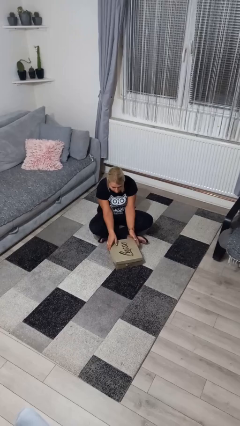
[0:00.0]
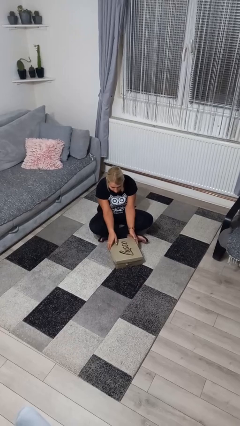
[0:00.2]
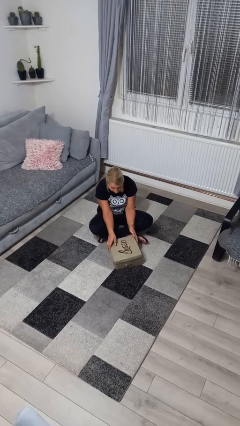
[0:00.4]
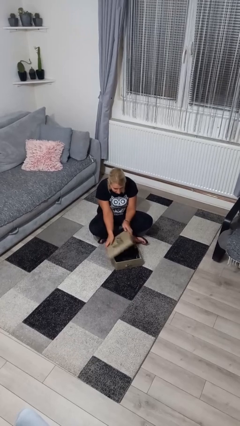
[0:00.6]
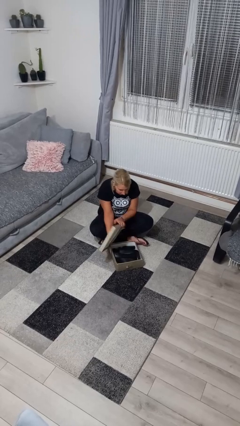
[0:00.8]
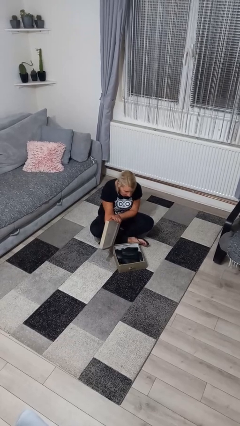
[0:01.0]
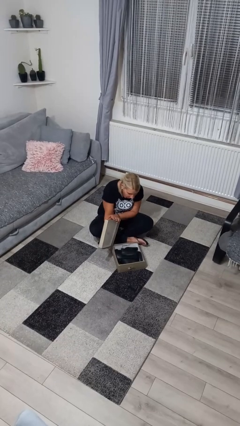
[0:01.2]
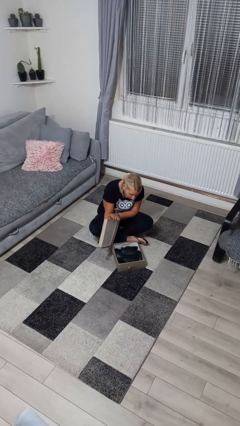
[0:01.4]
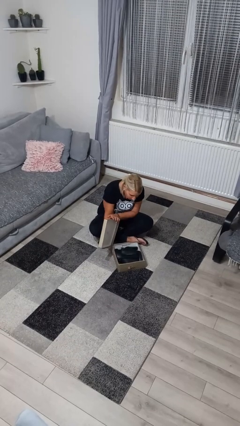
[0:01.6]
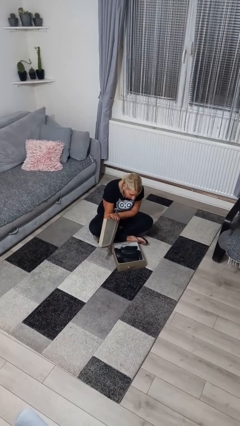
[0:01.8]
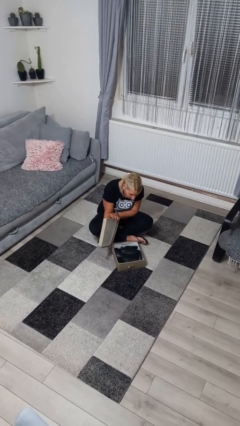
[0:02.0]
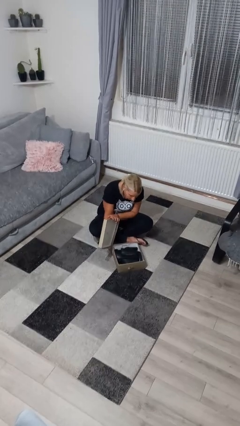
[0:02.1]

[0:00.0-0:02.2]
person opens box

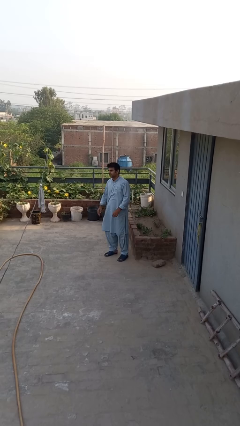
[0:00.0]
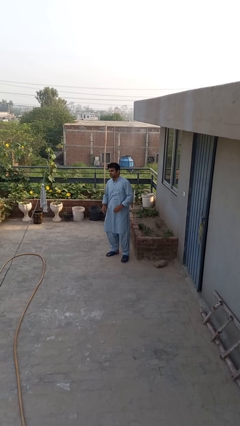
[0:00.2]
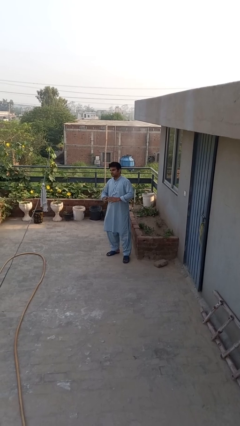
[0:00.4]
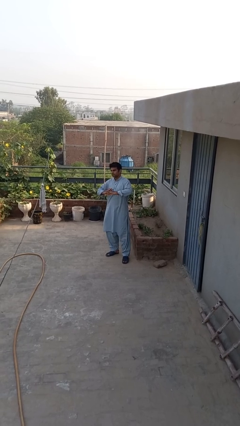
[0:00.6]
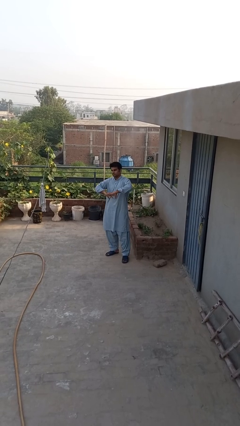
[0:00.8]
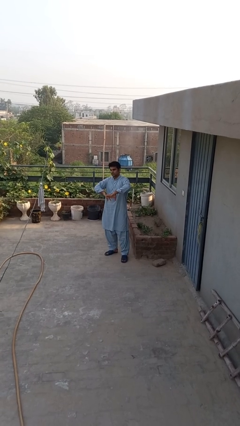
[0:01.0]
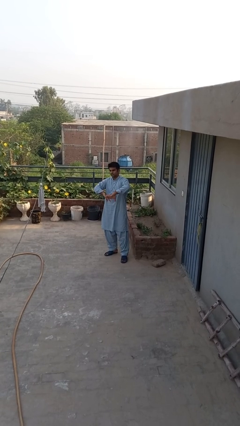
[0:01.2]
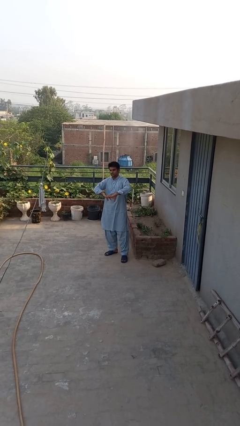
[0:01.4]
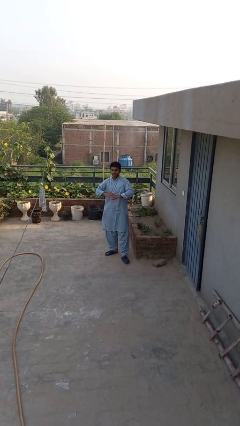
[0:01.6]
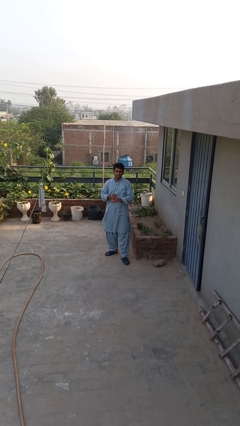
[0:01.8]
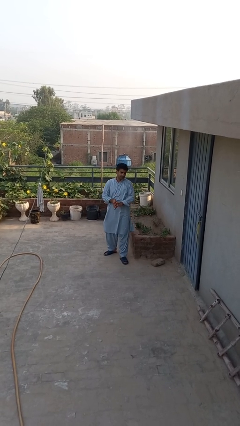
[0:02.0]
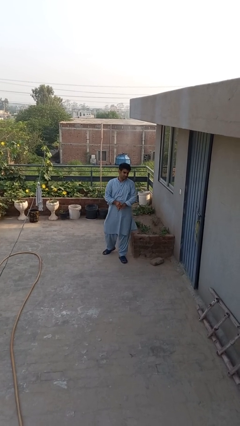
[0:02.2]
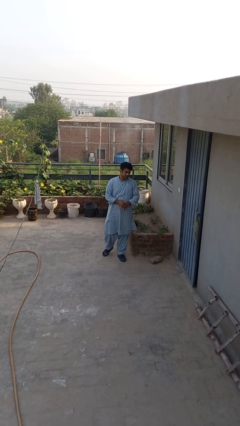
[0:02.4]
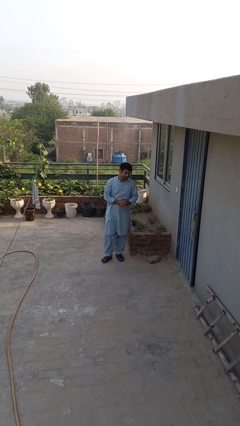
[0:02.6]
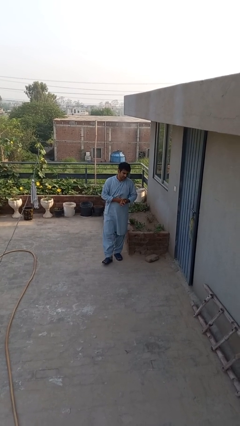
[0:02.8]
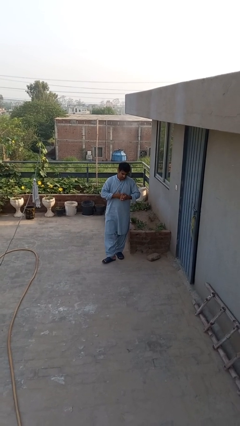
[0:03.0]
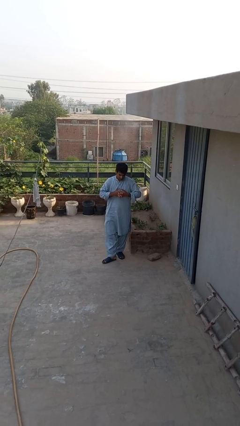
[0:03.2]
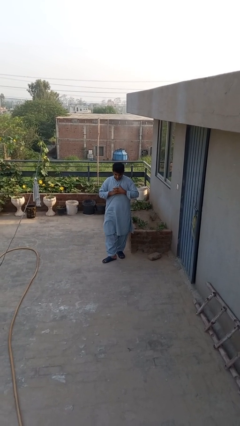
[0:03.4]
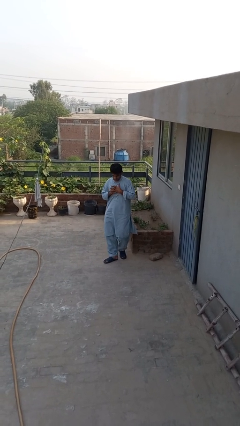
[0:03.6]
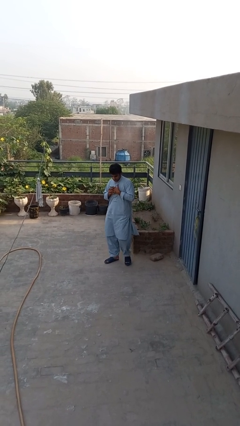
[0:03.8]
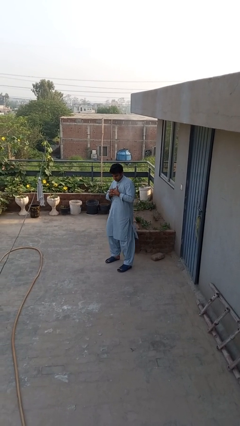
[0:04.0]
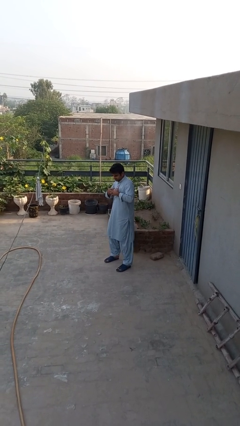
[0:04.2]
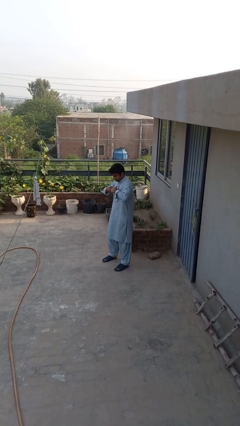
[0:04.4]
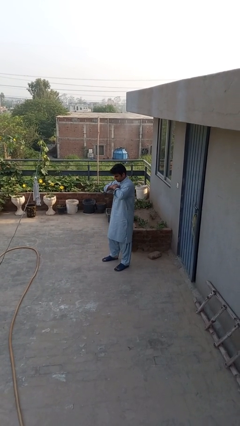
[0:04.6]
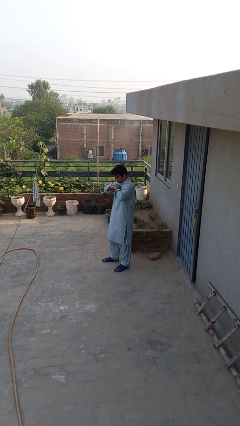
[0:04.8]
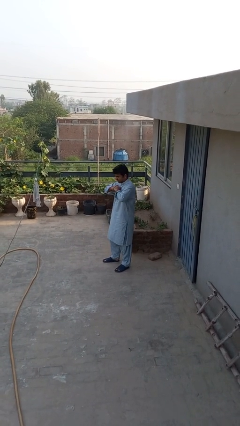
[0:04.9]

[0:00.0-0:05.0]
person cracks knuckles

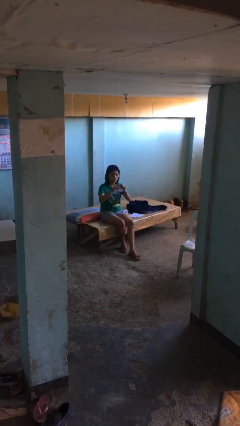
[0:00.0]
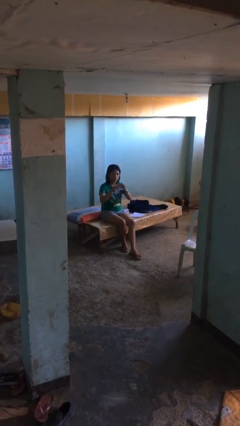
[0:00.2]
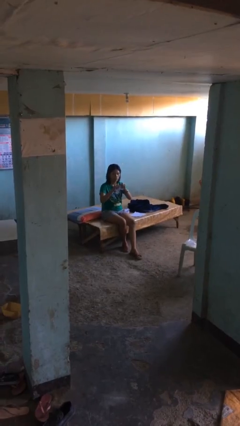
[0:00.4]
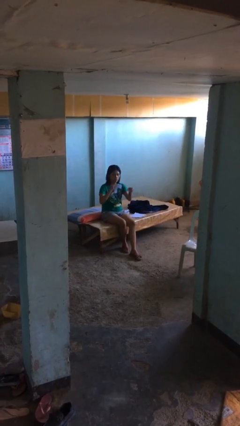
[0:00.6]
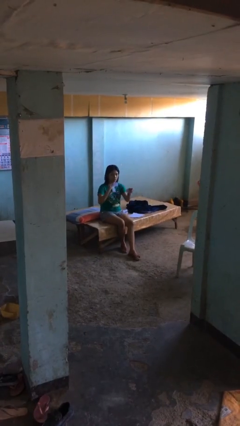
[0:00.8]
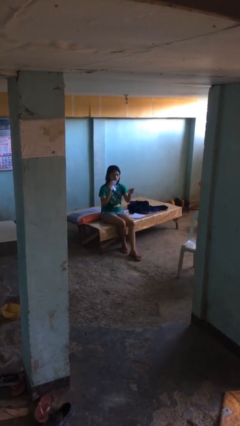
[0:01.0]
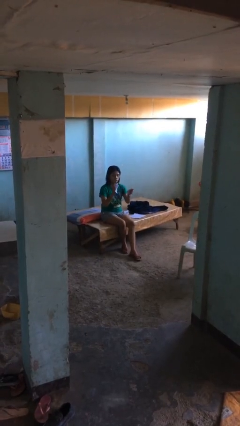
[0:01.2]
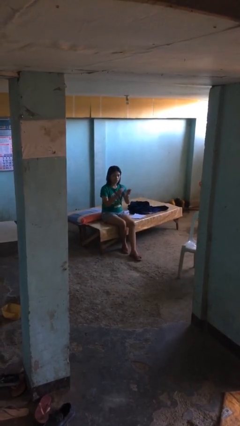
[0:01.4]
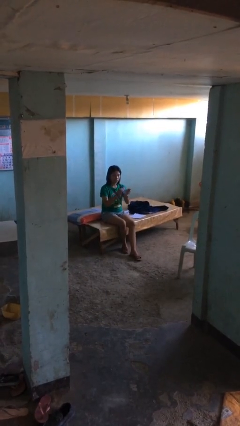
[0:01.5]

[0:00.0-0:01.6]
person tears paper

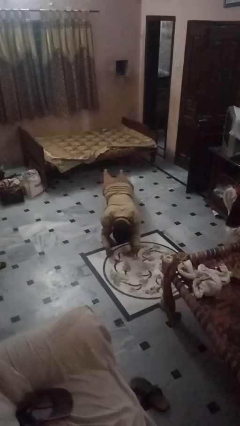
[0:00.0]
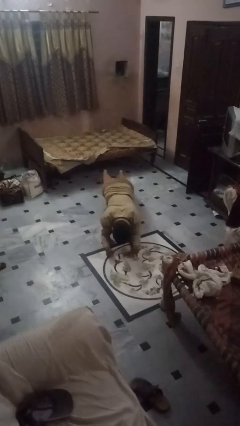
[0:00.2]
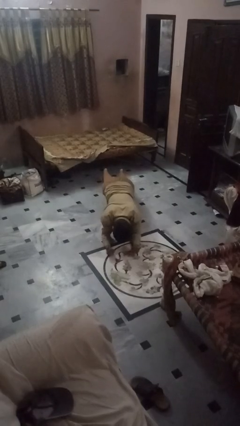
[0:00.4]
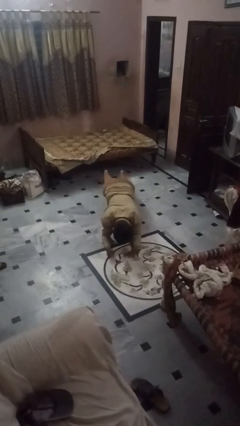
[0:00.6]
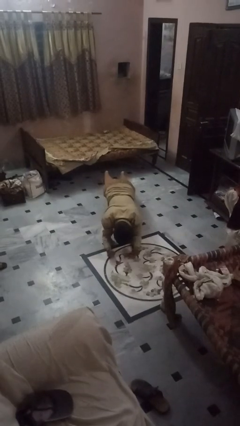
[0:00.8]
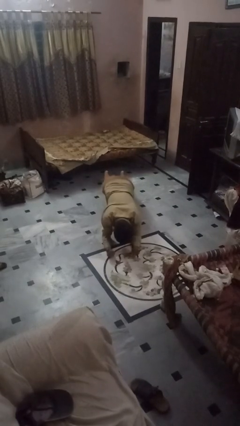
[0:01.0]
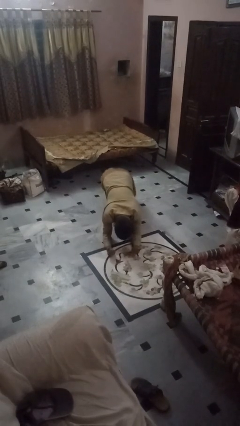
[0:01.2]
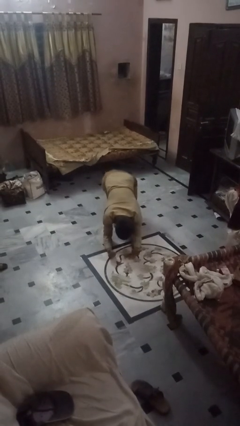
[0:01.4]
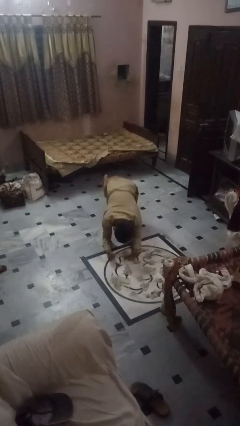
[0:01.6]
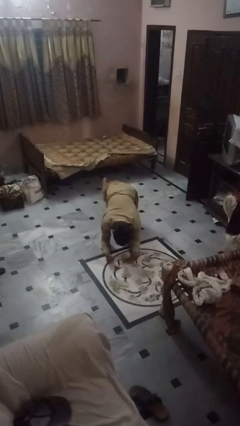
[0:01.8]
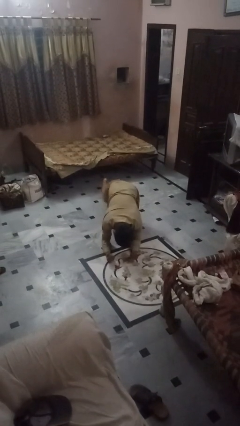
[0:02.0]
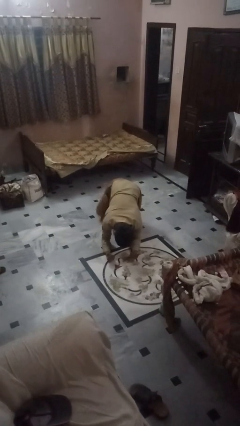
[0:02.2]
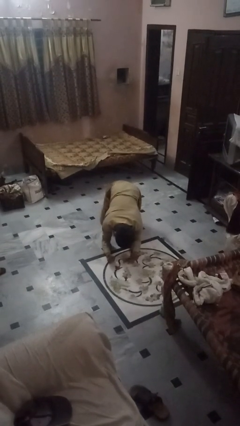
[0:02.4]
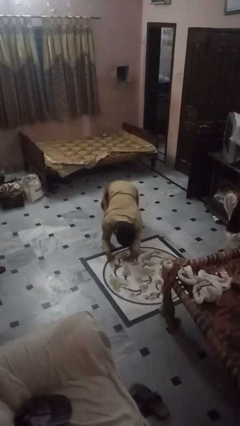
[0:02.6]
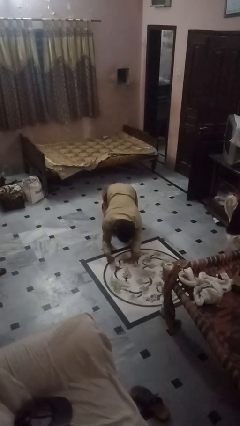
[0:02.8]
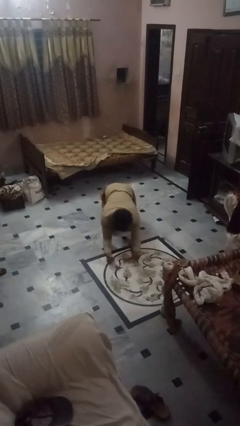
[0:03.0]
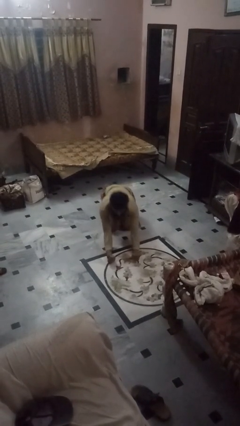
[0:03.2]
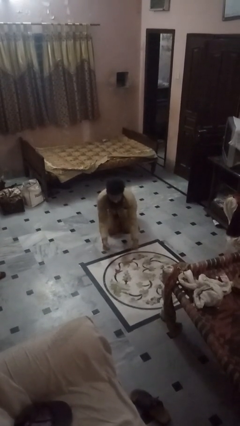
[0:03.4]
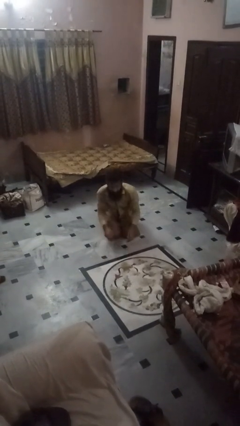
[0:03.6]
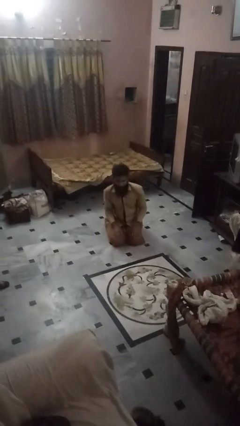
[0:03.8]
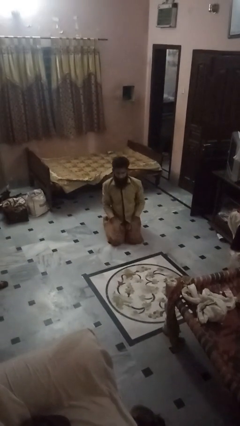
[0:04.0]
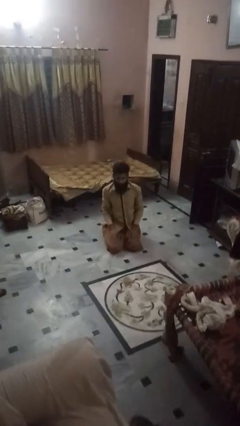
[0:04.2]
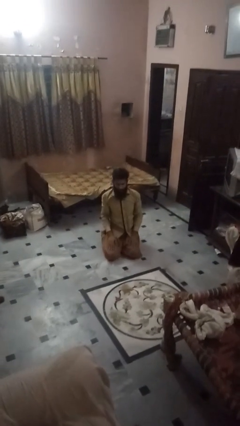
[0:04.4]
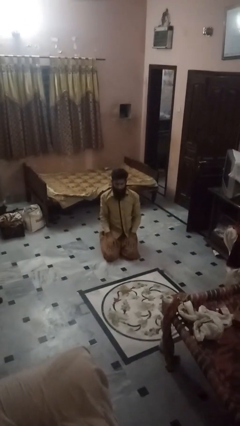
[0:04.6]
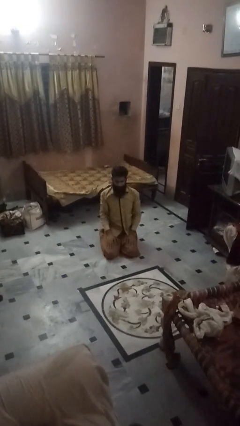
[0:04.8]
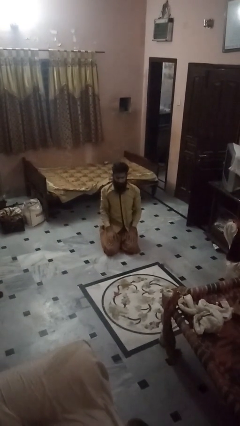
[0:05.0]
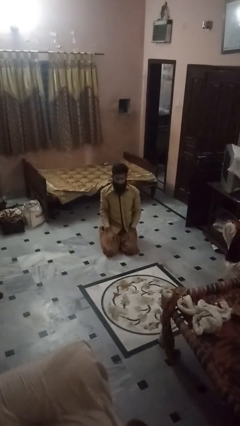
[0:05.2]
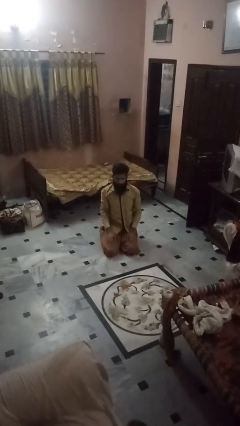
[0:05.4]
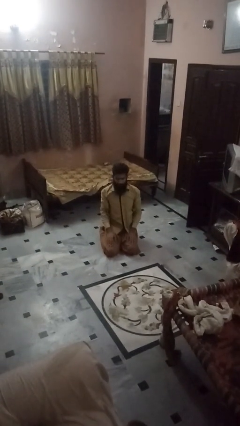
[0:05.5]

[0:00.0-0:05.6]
person stands up from floor

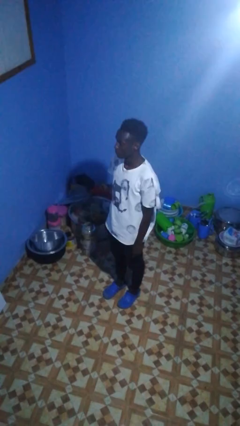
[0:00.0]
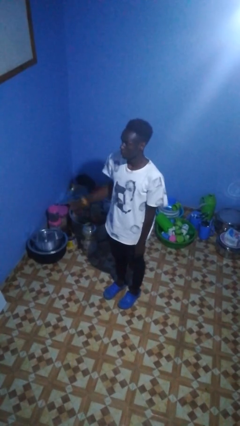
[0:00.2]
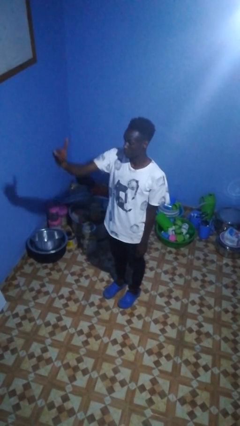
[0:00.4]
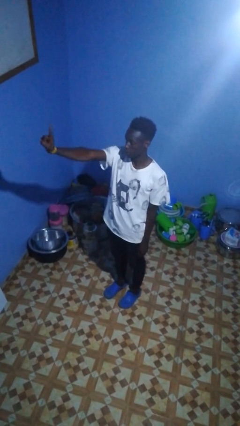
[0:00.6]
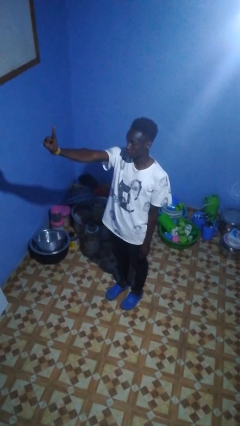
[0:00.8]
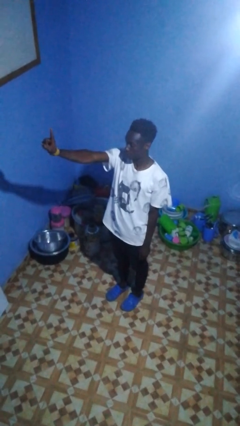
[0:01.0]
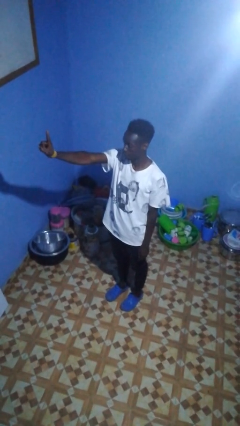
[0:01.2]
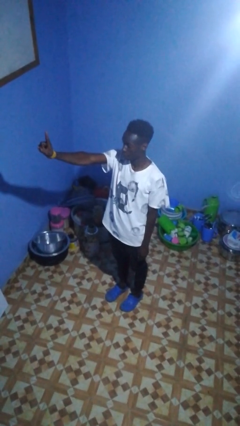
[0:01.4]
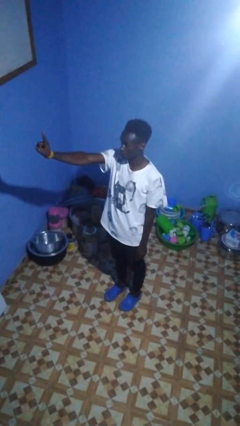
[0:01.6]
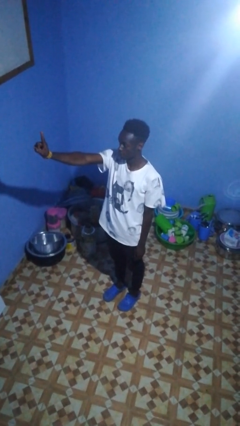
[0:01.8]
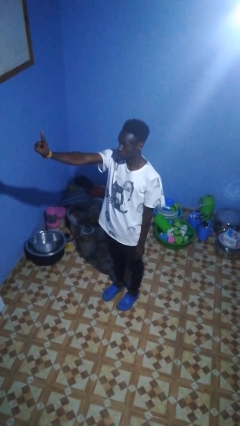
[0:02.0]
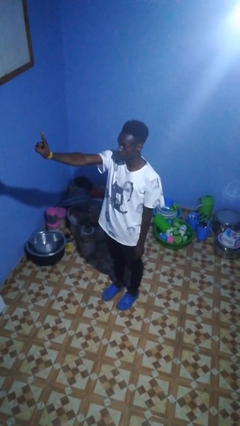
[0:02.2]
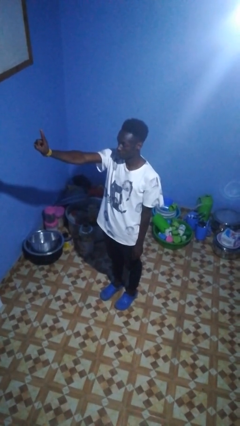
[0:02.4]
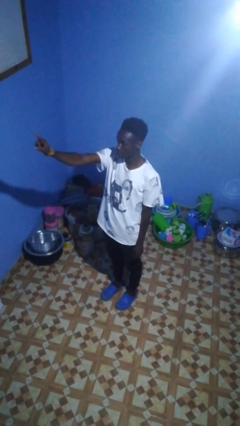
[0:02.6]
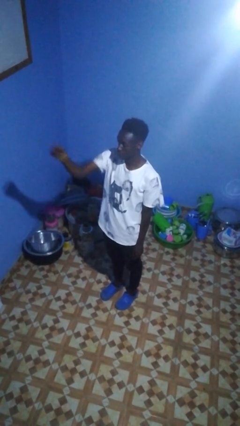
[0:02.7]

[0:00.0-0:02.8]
person gestures number one
